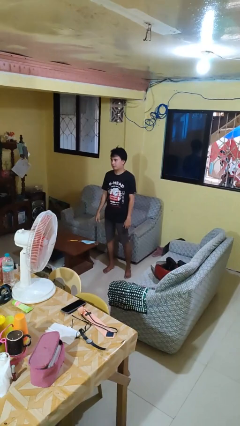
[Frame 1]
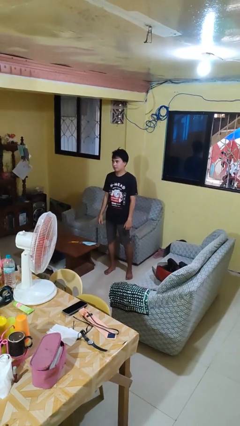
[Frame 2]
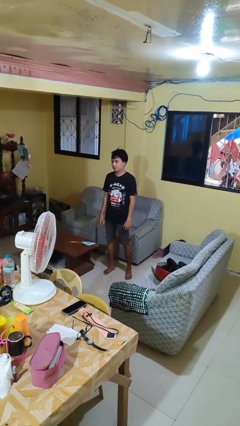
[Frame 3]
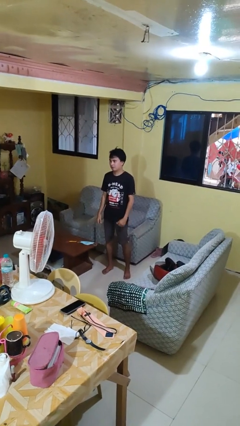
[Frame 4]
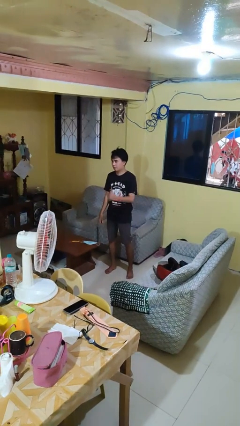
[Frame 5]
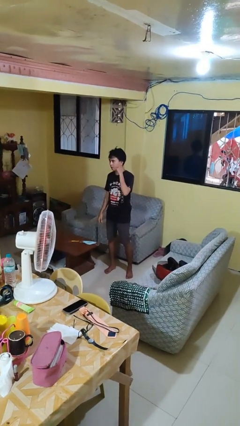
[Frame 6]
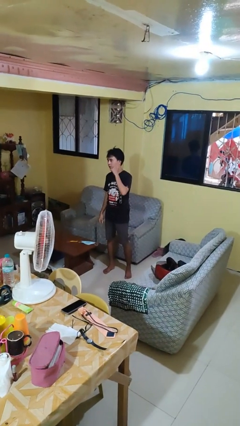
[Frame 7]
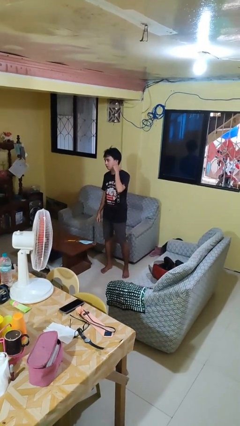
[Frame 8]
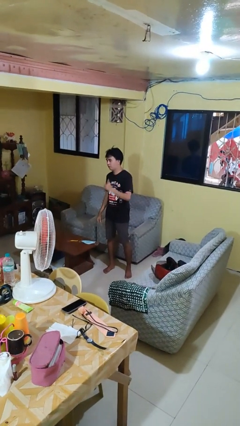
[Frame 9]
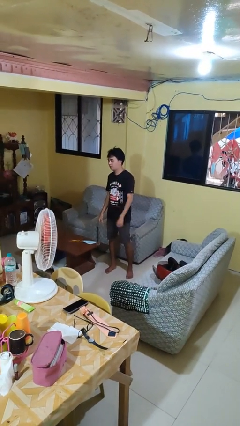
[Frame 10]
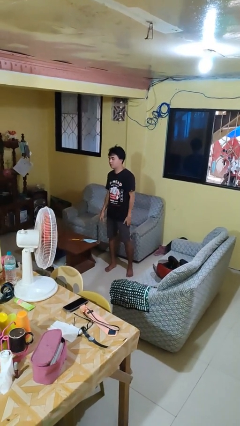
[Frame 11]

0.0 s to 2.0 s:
person gestures behind me

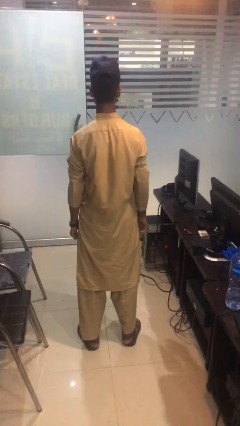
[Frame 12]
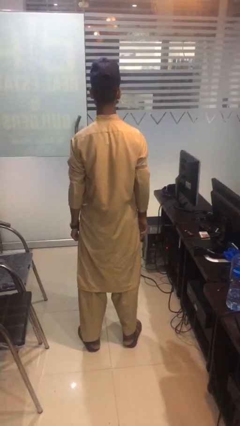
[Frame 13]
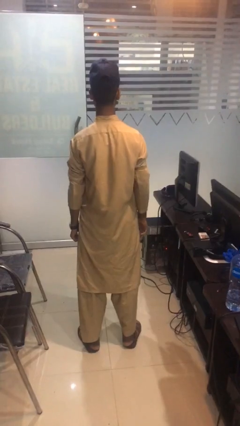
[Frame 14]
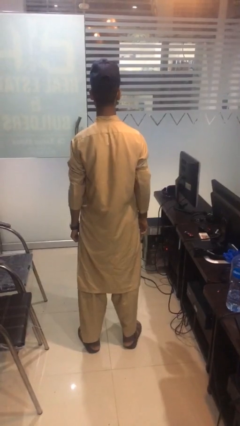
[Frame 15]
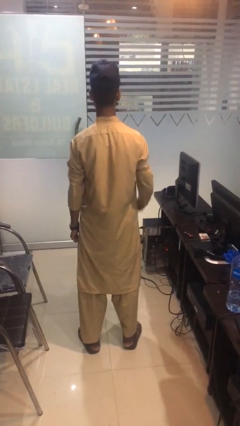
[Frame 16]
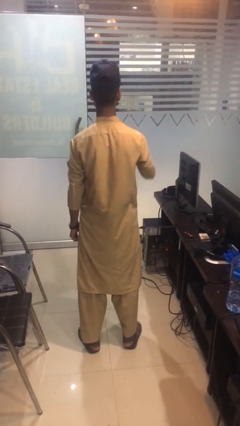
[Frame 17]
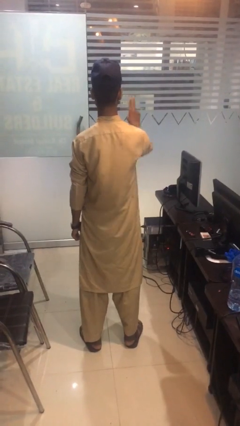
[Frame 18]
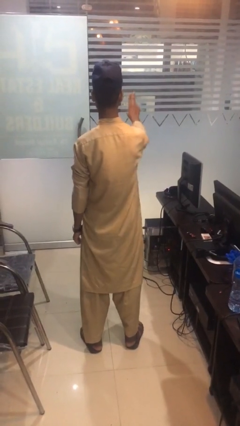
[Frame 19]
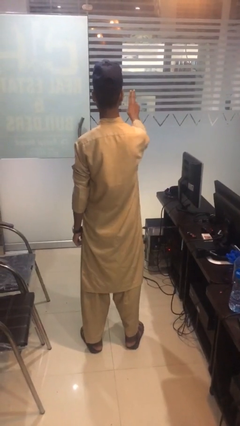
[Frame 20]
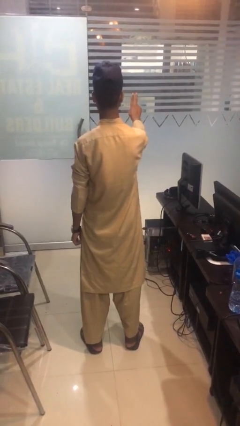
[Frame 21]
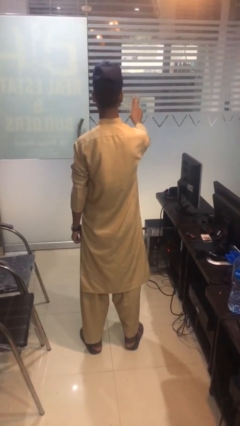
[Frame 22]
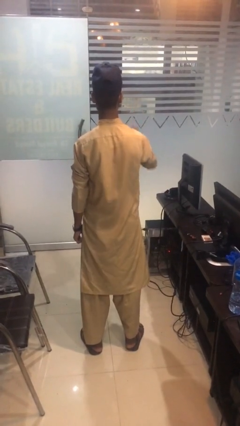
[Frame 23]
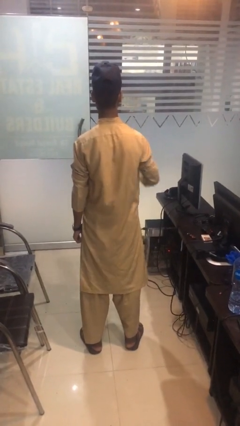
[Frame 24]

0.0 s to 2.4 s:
person gestures peace

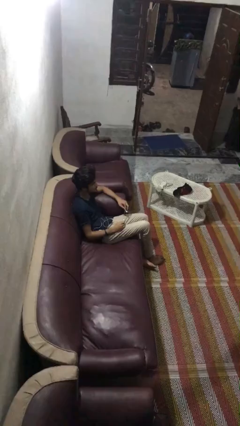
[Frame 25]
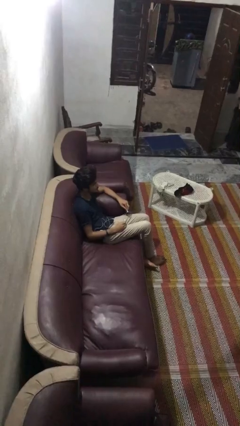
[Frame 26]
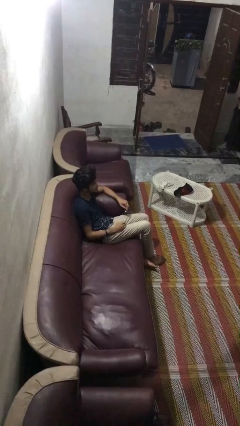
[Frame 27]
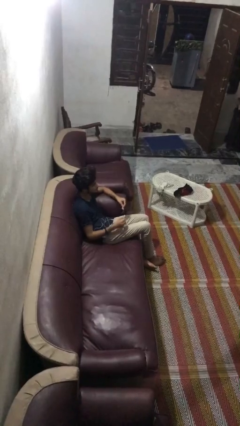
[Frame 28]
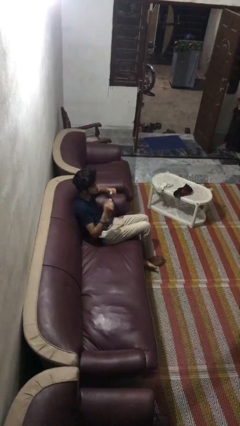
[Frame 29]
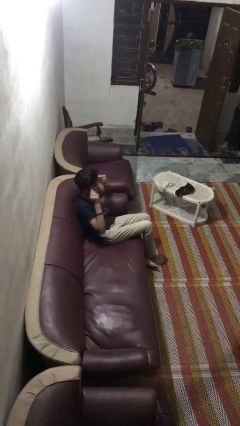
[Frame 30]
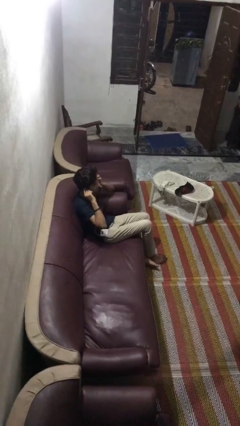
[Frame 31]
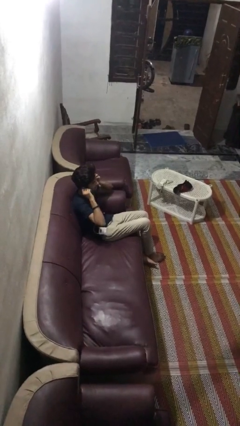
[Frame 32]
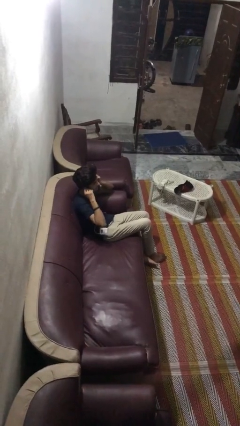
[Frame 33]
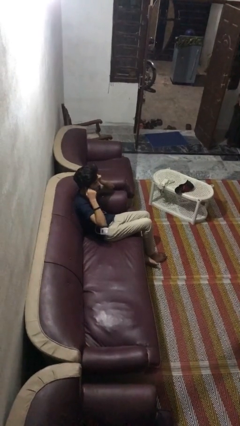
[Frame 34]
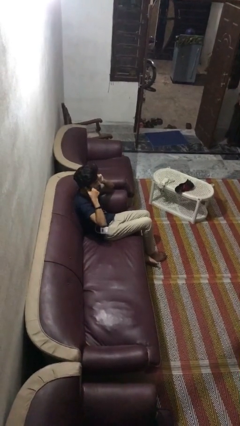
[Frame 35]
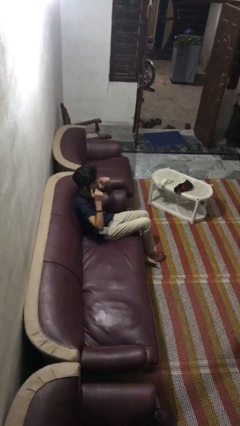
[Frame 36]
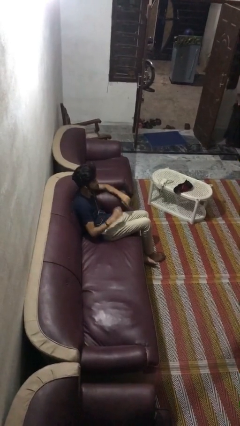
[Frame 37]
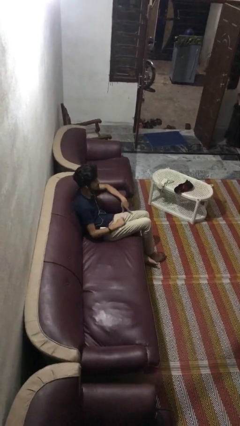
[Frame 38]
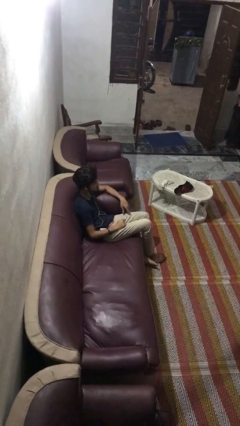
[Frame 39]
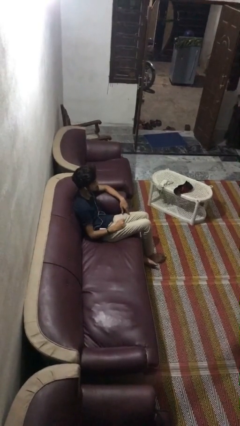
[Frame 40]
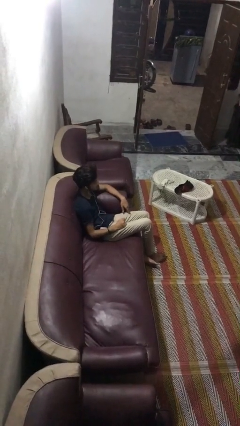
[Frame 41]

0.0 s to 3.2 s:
person puts on headphones

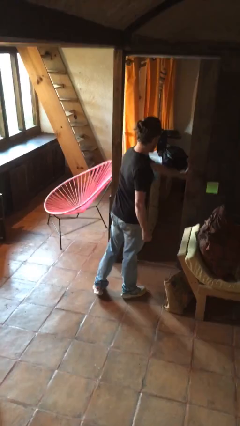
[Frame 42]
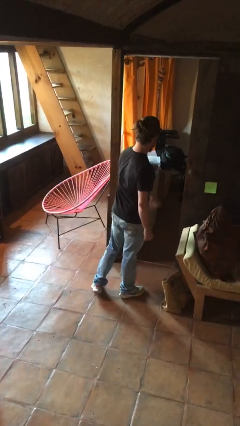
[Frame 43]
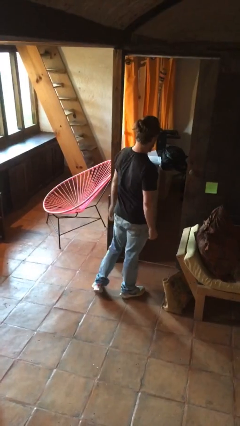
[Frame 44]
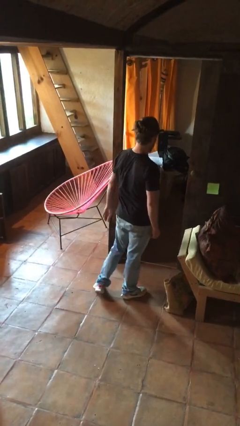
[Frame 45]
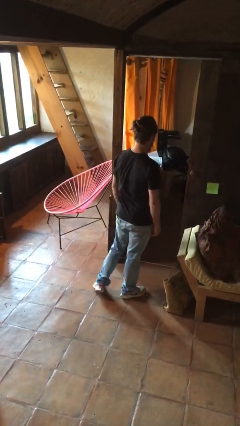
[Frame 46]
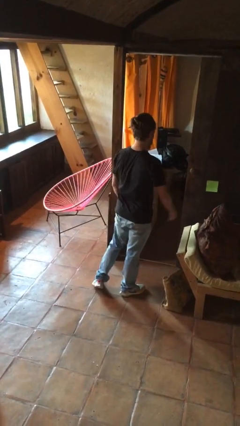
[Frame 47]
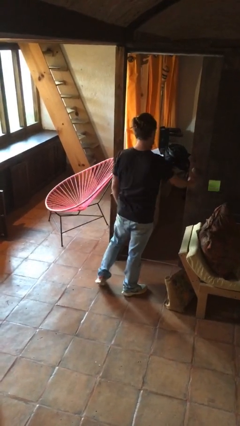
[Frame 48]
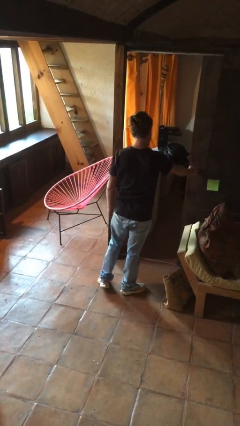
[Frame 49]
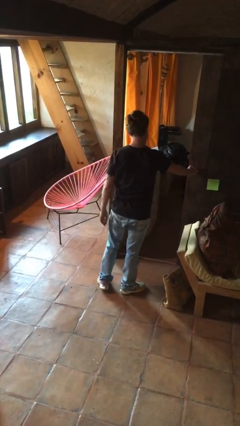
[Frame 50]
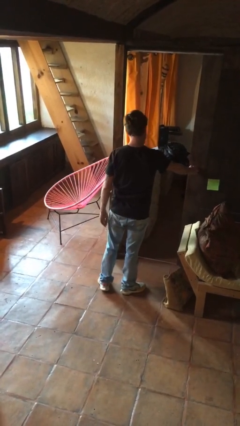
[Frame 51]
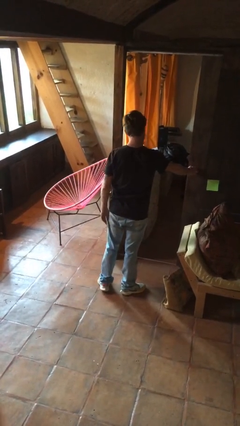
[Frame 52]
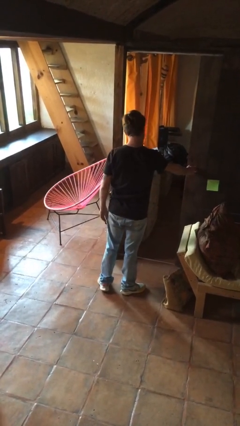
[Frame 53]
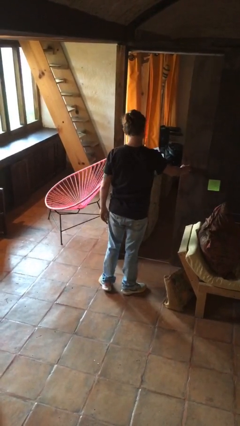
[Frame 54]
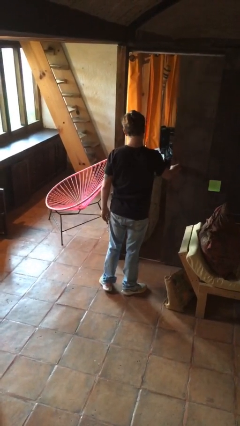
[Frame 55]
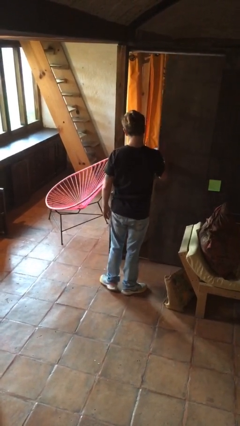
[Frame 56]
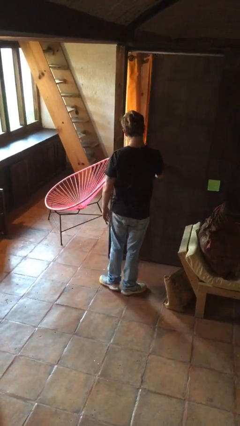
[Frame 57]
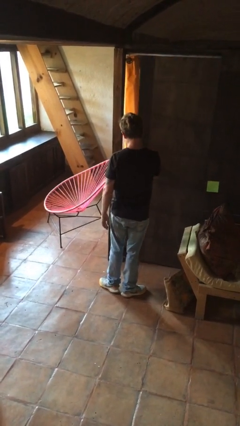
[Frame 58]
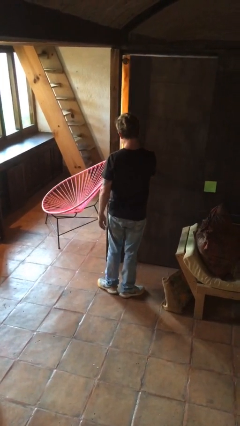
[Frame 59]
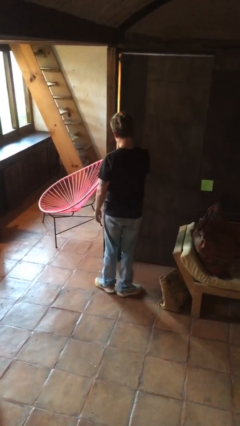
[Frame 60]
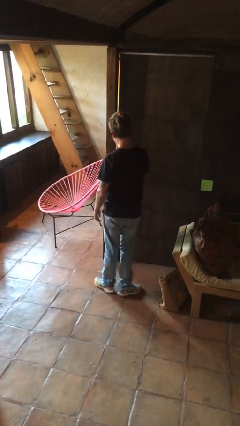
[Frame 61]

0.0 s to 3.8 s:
person closes facility door

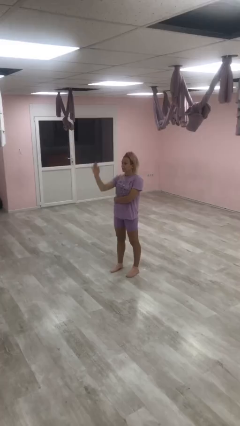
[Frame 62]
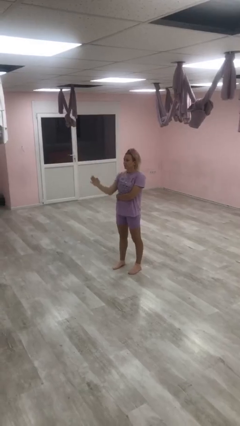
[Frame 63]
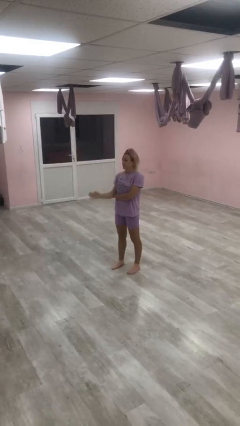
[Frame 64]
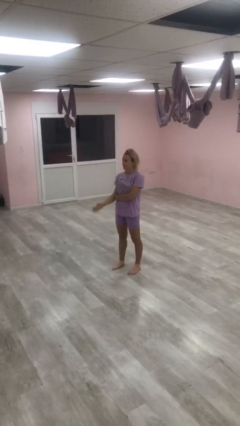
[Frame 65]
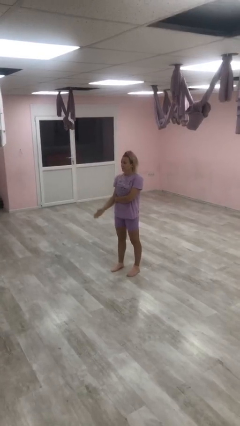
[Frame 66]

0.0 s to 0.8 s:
person gestures lower hand

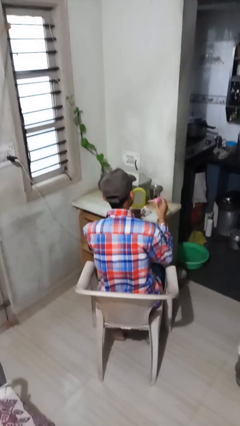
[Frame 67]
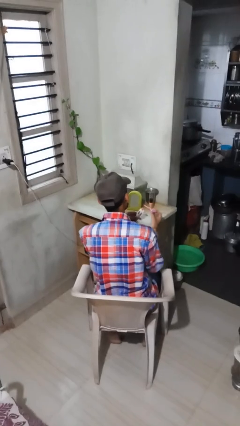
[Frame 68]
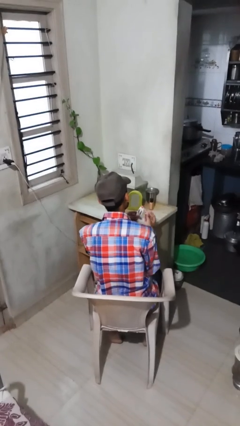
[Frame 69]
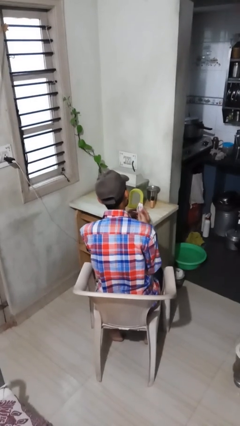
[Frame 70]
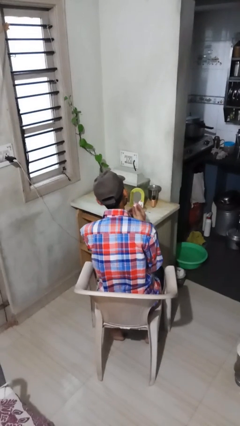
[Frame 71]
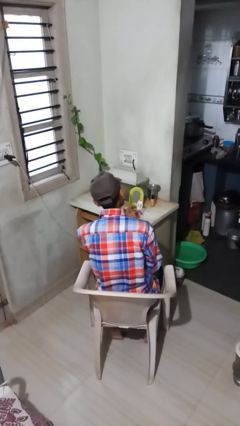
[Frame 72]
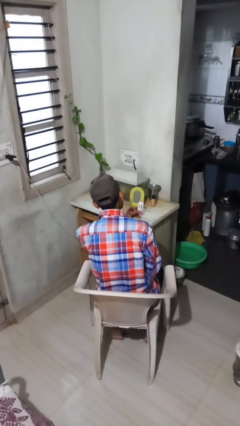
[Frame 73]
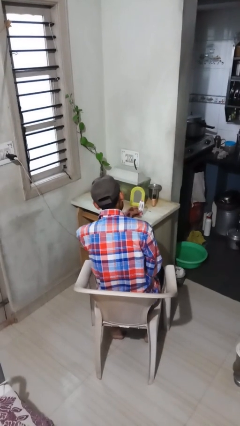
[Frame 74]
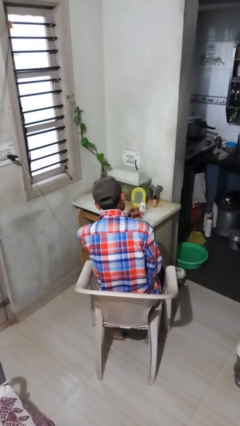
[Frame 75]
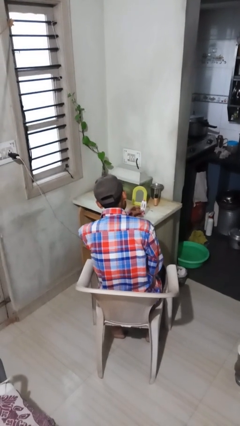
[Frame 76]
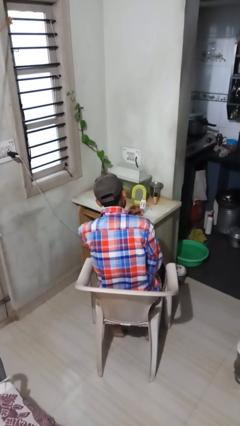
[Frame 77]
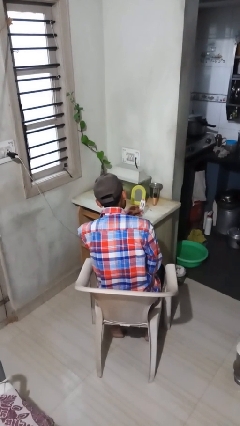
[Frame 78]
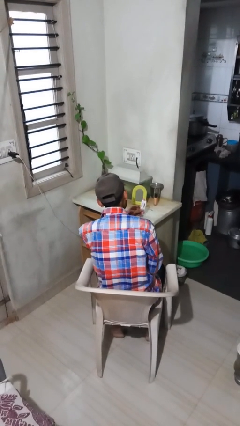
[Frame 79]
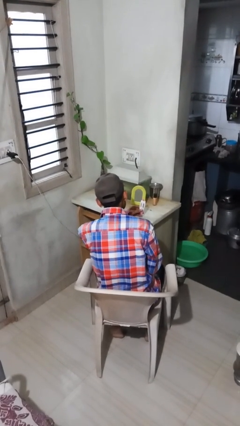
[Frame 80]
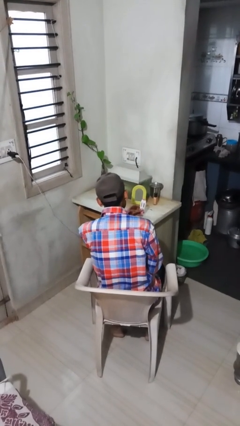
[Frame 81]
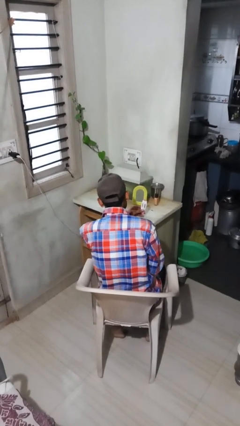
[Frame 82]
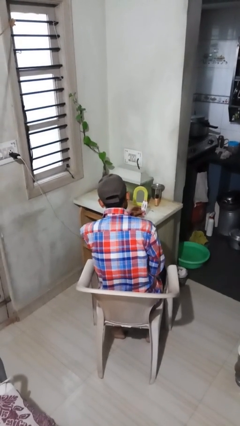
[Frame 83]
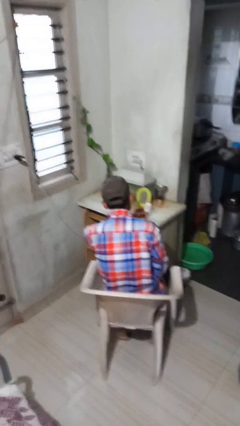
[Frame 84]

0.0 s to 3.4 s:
person applies lip makeup

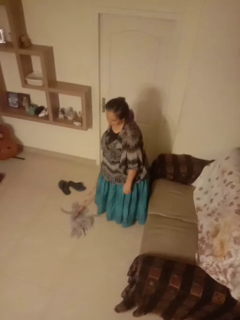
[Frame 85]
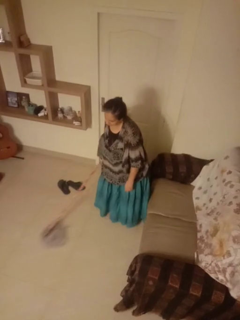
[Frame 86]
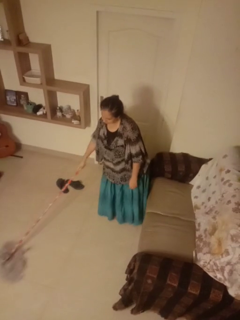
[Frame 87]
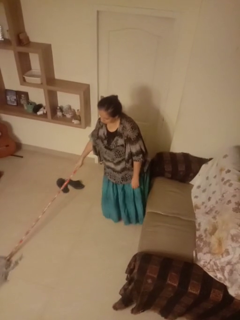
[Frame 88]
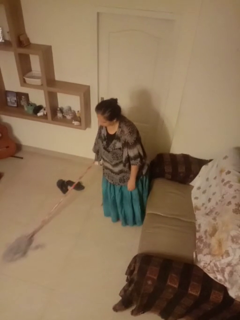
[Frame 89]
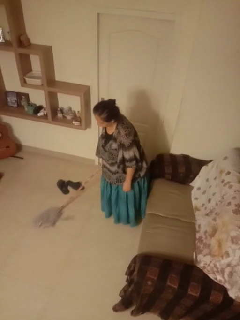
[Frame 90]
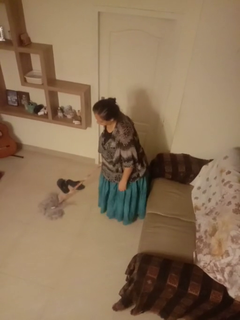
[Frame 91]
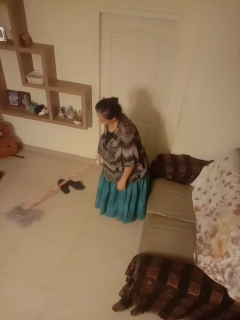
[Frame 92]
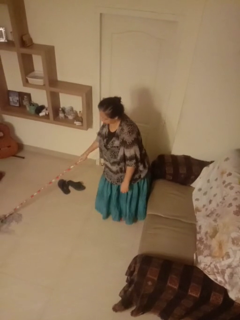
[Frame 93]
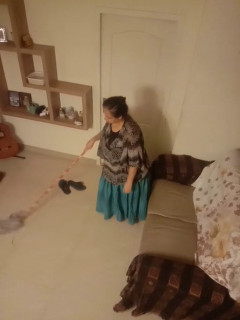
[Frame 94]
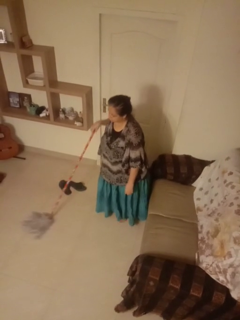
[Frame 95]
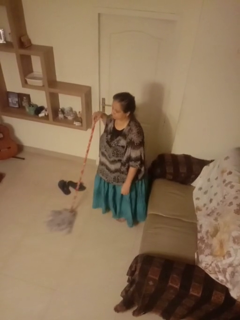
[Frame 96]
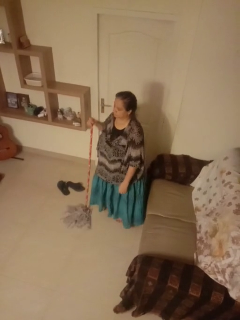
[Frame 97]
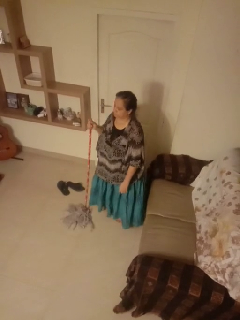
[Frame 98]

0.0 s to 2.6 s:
person mops
